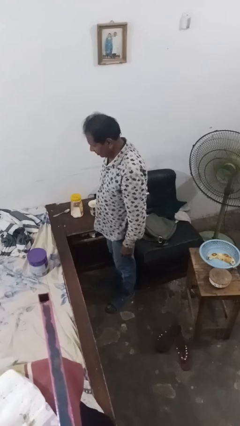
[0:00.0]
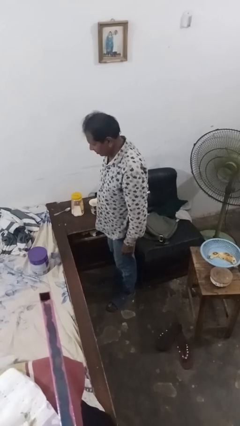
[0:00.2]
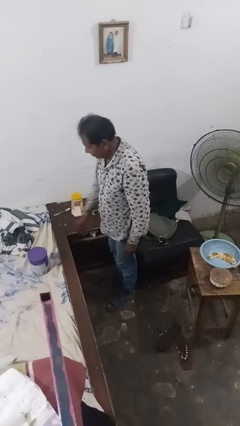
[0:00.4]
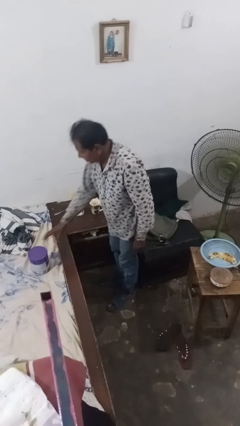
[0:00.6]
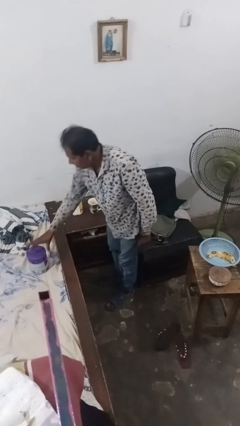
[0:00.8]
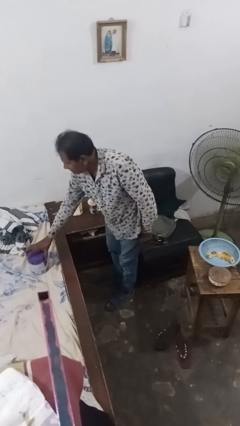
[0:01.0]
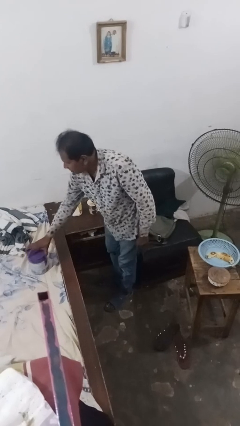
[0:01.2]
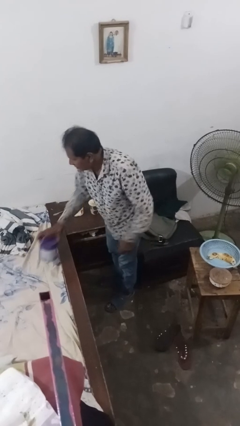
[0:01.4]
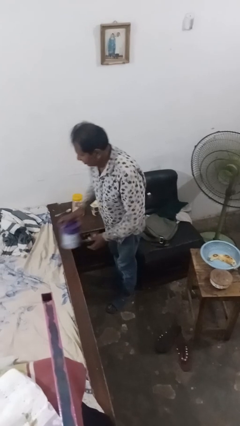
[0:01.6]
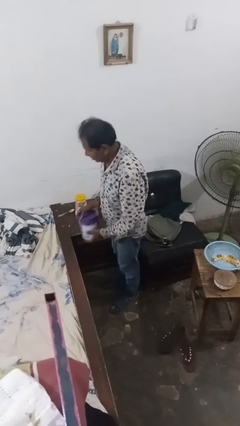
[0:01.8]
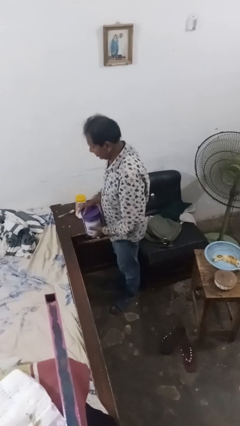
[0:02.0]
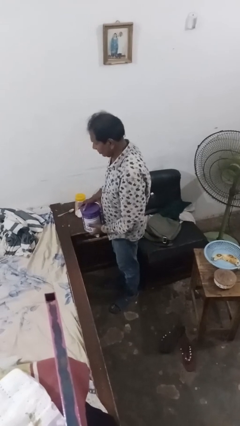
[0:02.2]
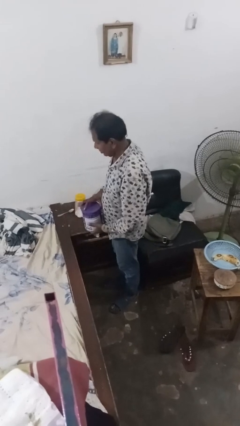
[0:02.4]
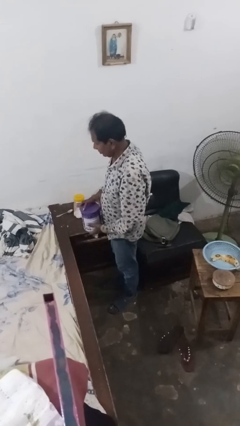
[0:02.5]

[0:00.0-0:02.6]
person picks up object from bed

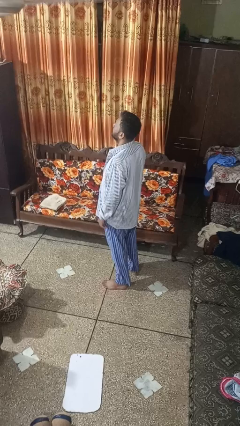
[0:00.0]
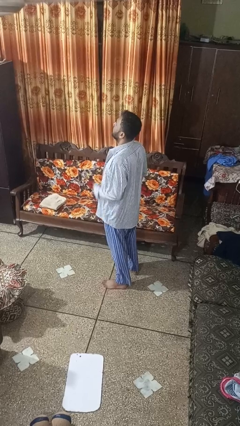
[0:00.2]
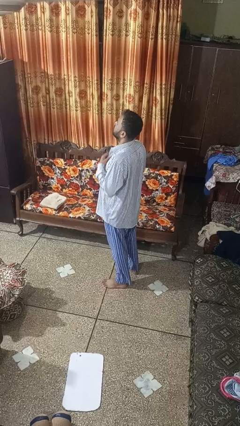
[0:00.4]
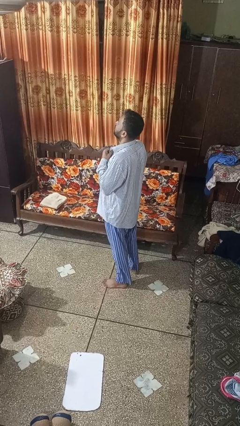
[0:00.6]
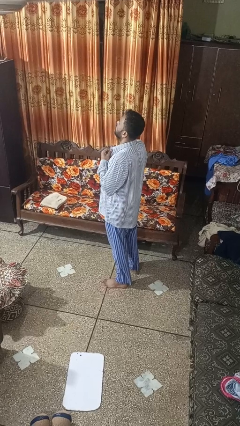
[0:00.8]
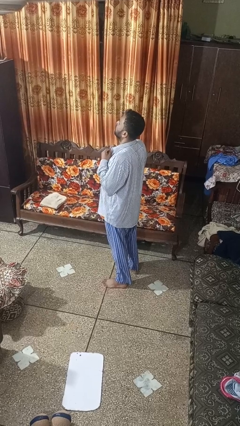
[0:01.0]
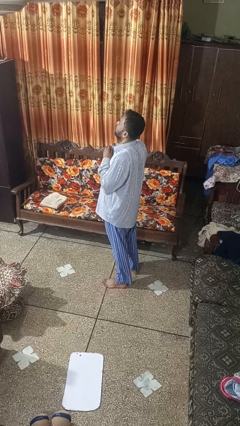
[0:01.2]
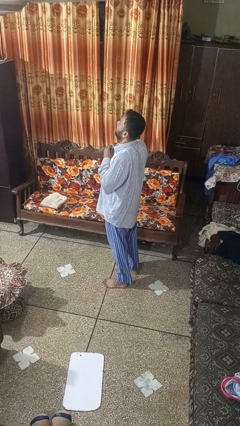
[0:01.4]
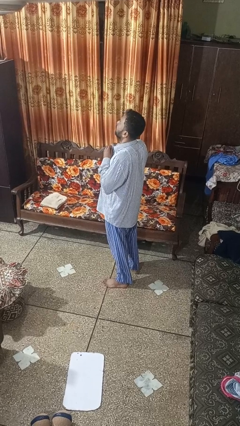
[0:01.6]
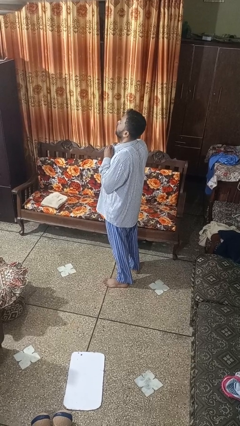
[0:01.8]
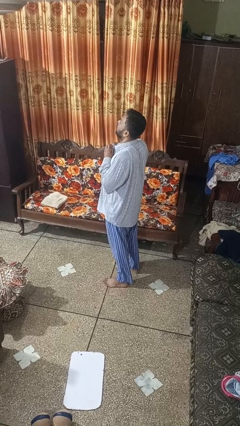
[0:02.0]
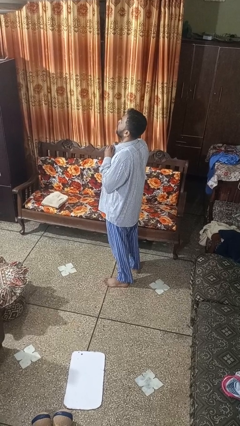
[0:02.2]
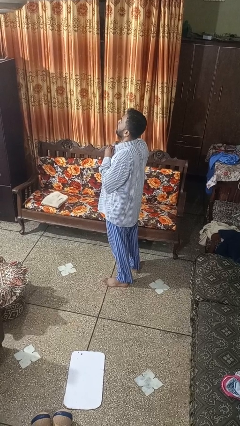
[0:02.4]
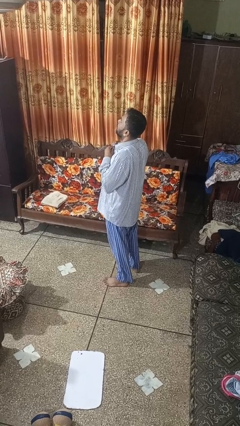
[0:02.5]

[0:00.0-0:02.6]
person buttons shirt

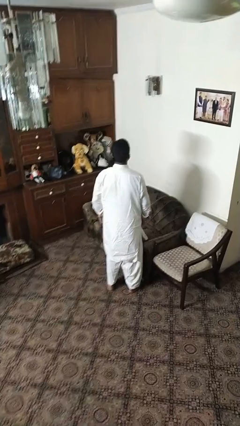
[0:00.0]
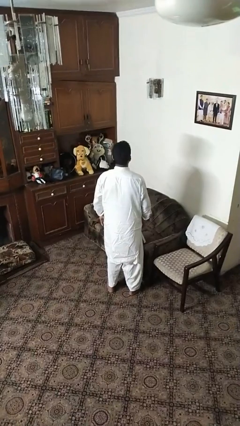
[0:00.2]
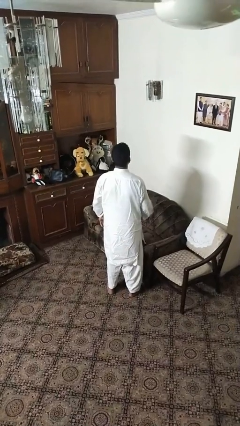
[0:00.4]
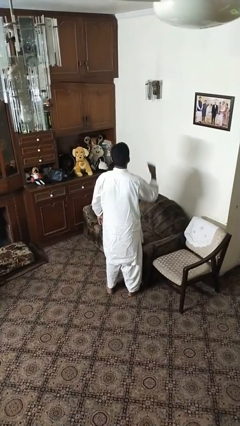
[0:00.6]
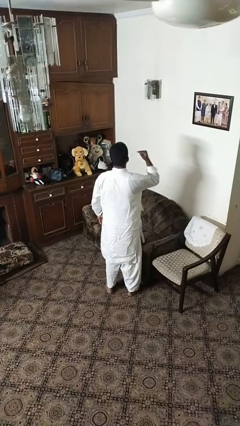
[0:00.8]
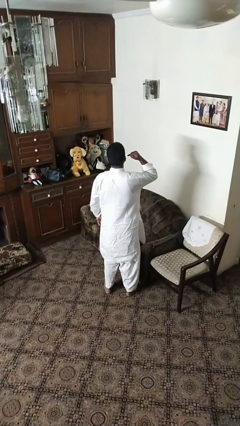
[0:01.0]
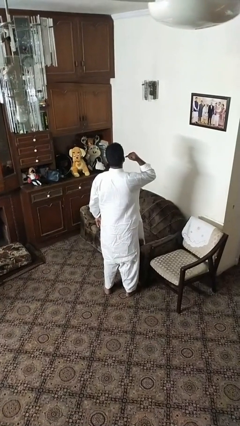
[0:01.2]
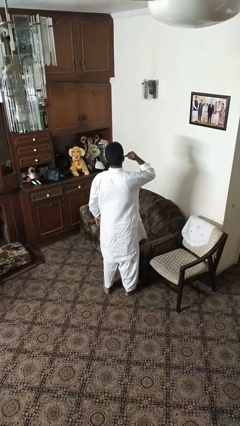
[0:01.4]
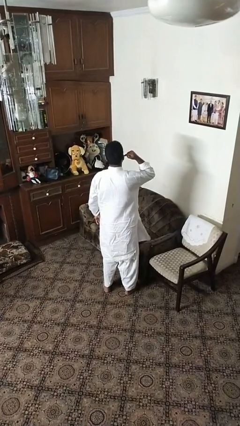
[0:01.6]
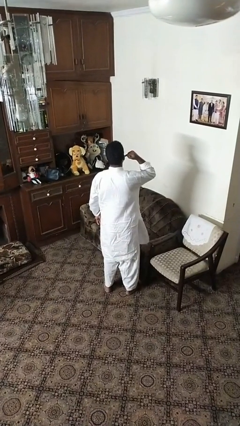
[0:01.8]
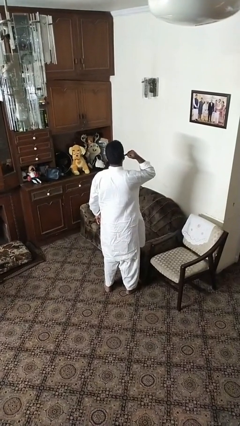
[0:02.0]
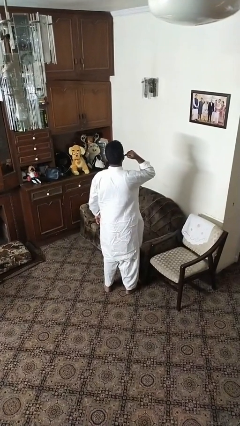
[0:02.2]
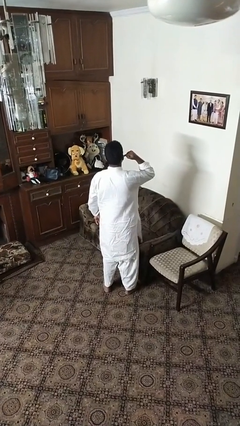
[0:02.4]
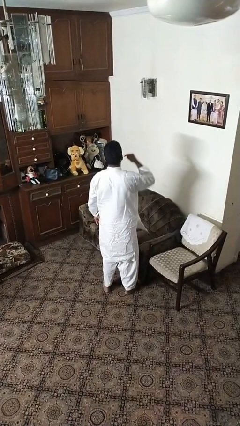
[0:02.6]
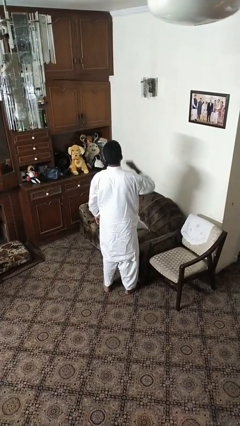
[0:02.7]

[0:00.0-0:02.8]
person gestures listen closely

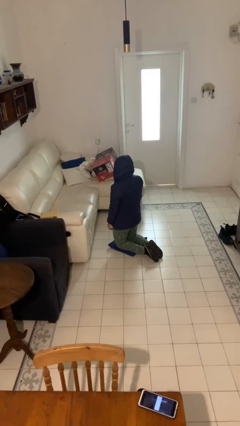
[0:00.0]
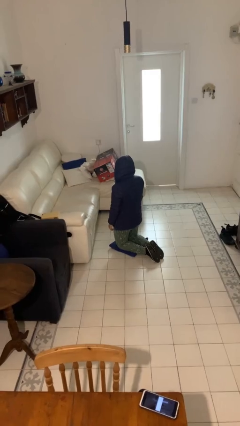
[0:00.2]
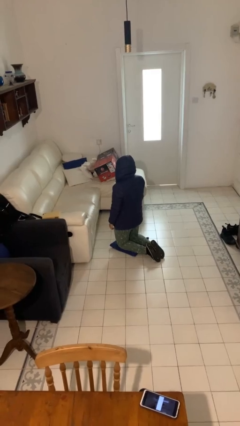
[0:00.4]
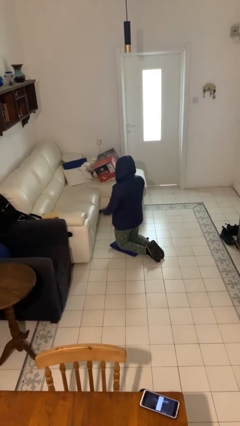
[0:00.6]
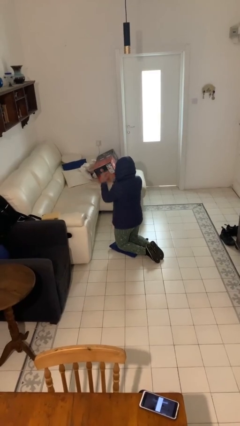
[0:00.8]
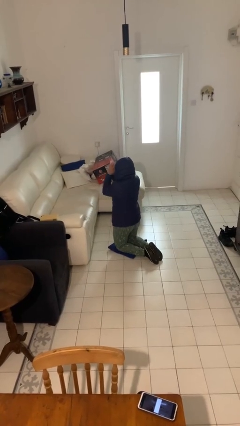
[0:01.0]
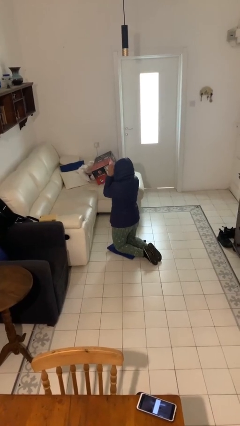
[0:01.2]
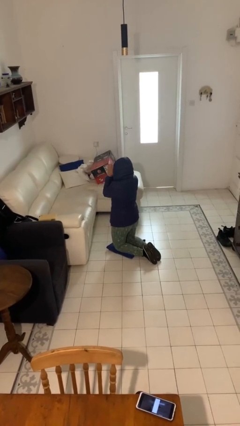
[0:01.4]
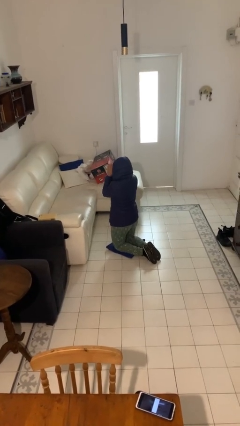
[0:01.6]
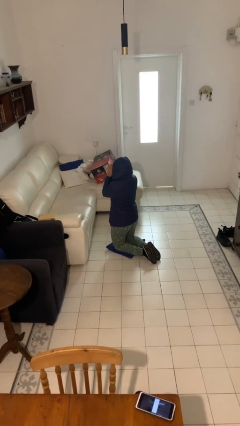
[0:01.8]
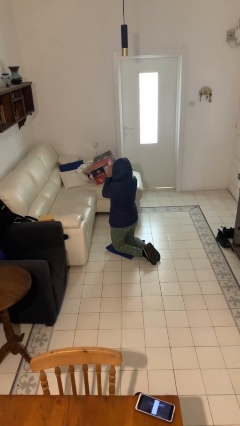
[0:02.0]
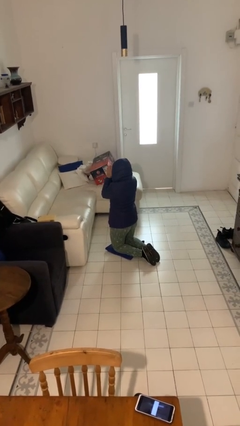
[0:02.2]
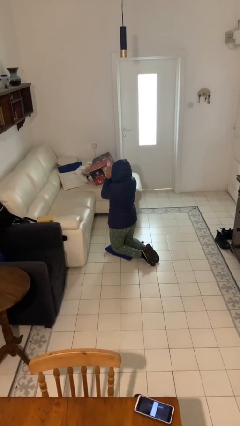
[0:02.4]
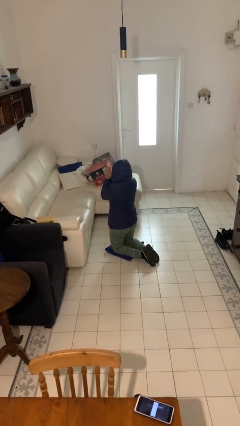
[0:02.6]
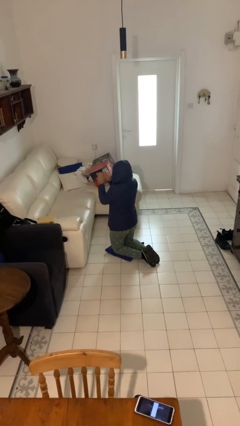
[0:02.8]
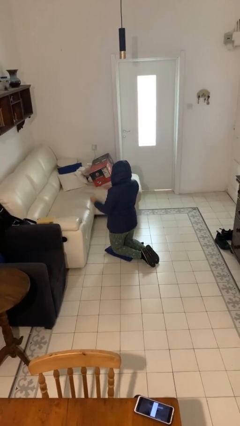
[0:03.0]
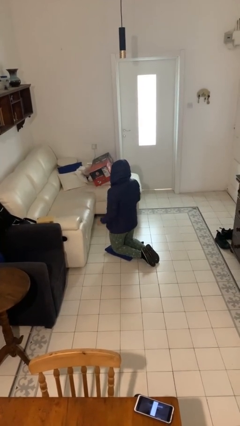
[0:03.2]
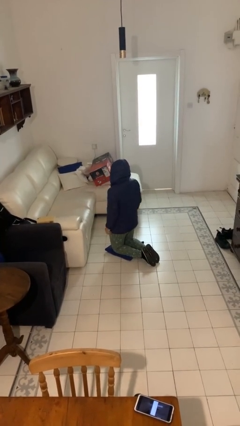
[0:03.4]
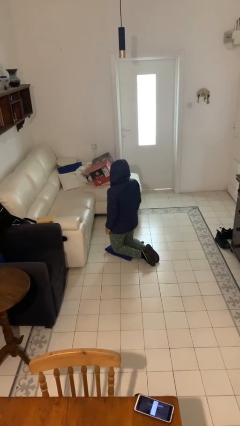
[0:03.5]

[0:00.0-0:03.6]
person prays

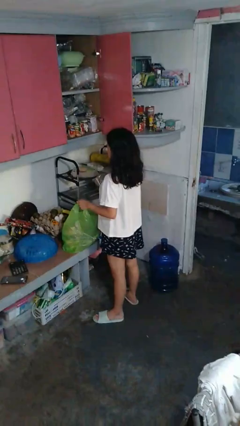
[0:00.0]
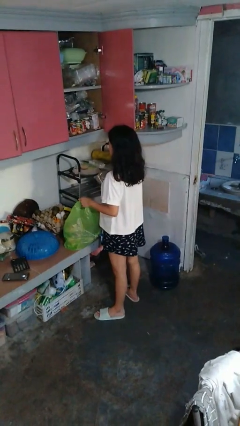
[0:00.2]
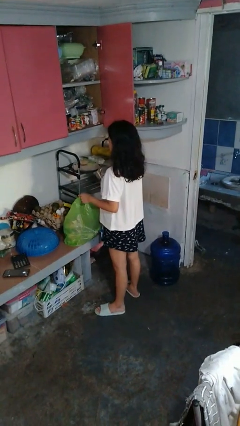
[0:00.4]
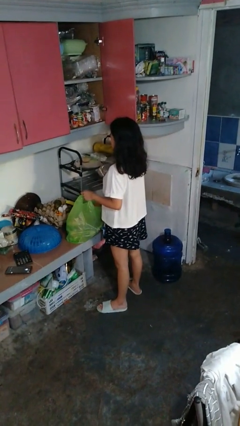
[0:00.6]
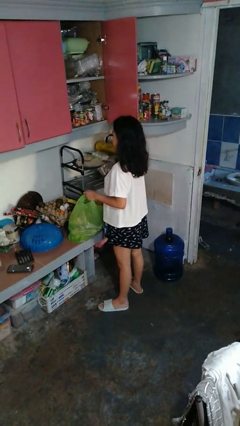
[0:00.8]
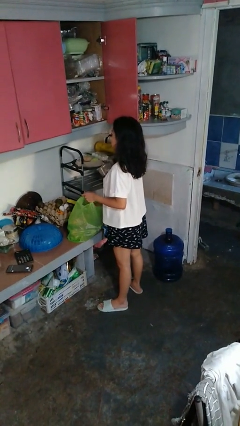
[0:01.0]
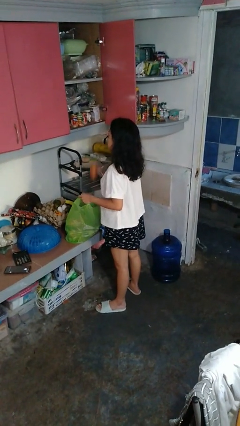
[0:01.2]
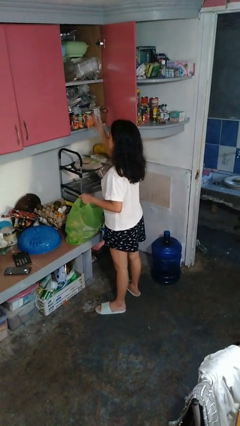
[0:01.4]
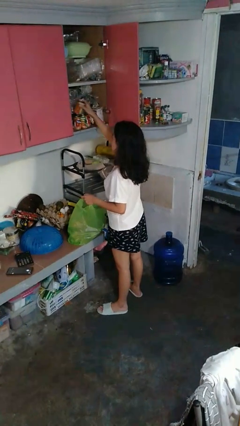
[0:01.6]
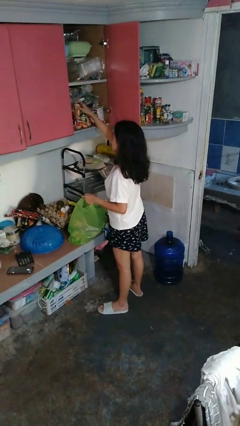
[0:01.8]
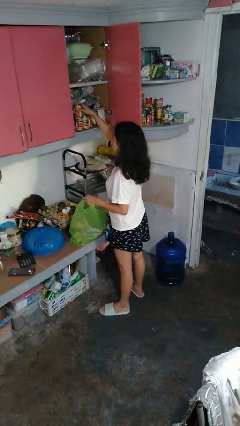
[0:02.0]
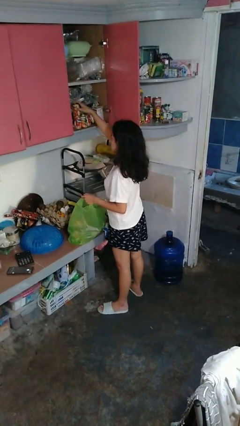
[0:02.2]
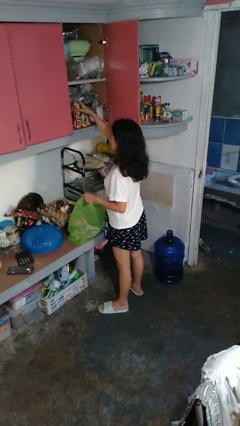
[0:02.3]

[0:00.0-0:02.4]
person loads groceries into cabinet

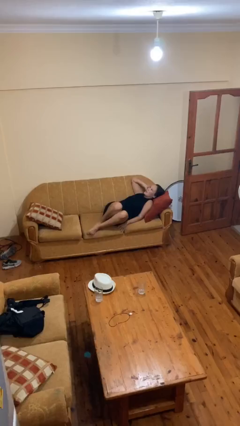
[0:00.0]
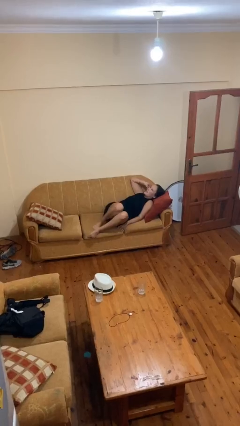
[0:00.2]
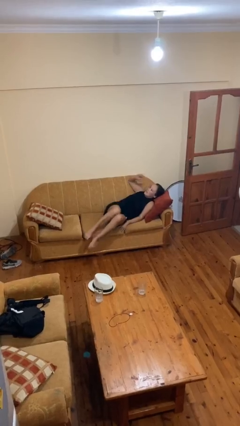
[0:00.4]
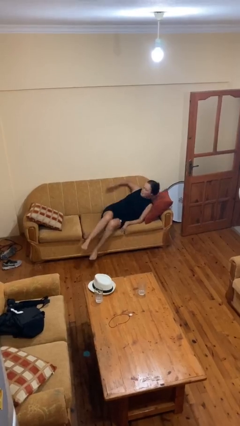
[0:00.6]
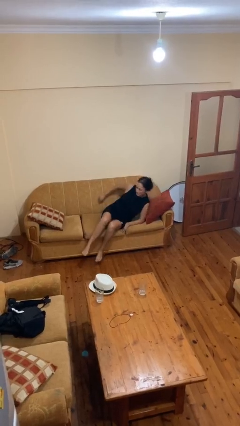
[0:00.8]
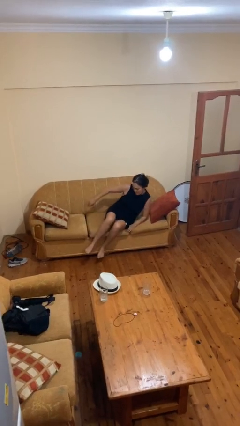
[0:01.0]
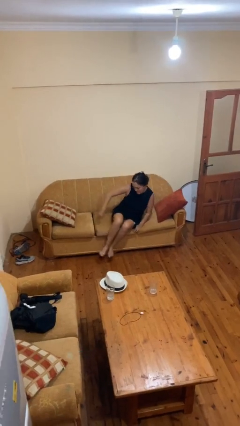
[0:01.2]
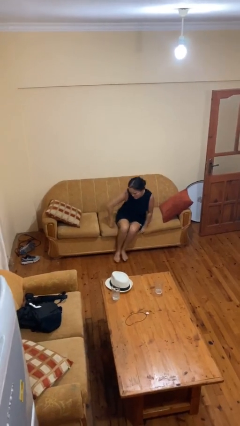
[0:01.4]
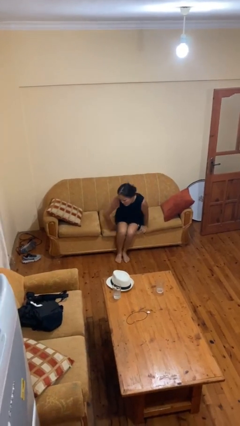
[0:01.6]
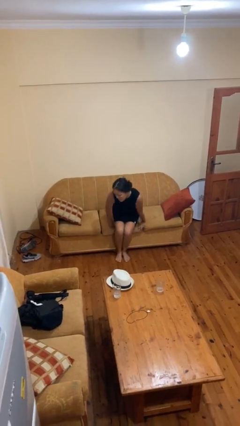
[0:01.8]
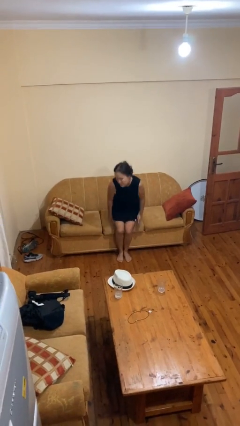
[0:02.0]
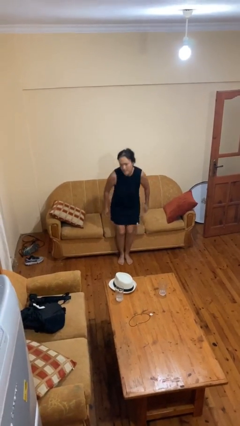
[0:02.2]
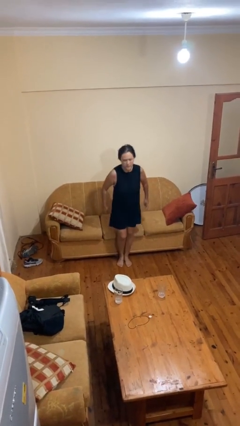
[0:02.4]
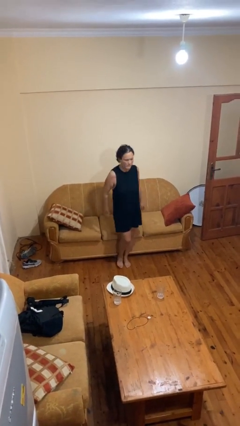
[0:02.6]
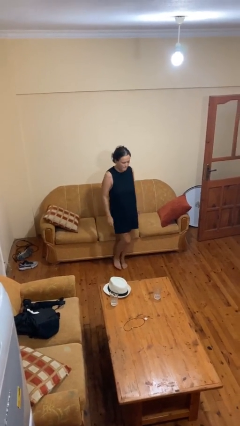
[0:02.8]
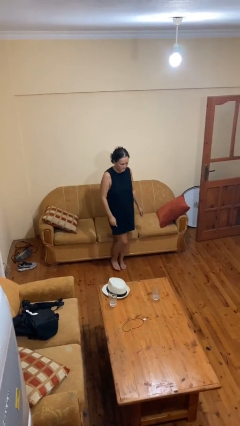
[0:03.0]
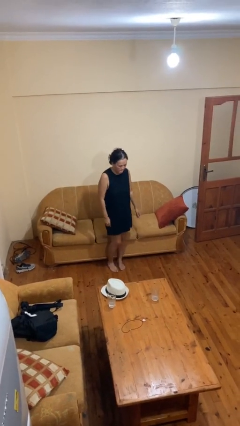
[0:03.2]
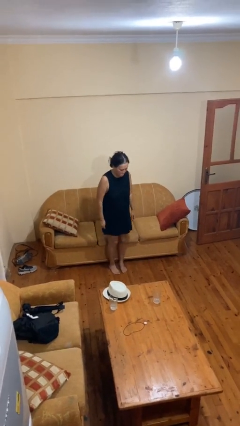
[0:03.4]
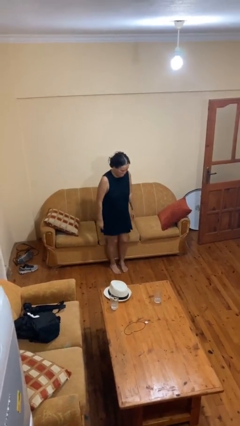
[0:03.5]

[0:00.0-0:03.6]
person stands up
